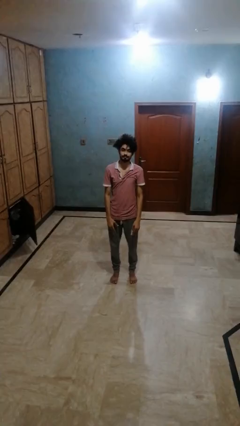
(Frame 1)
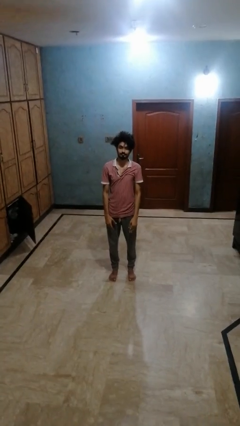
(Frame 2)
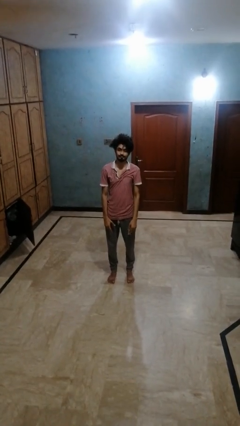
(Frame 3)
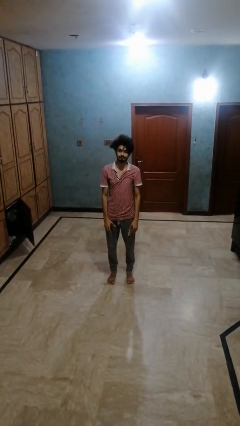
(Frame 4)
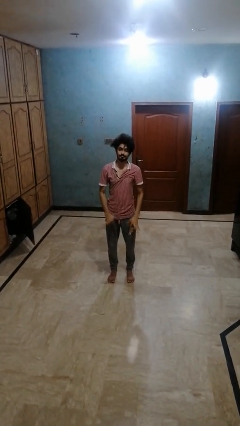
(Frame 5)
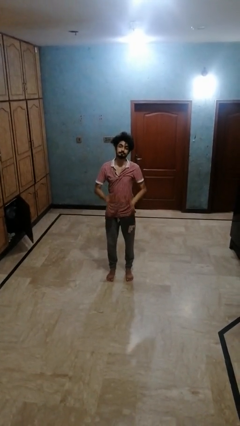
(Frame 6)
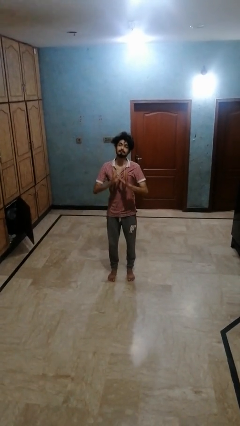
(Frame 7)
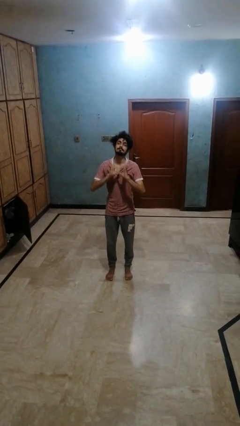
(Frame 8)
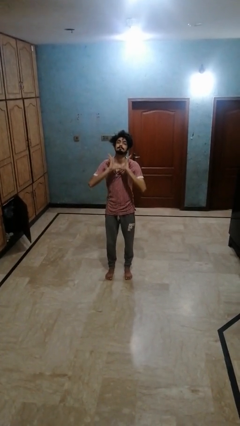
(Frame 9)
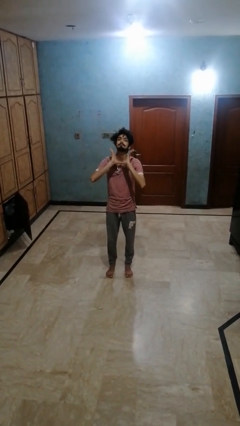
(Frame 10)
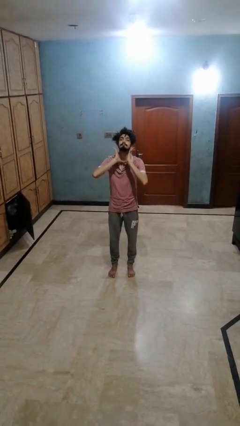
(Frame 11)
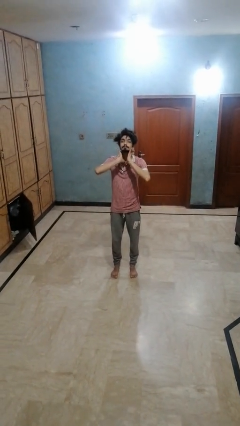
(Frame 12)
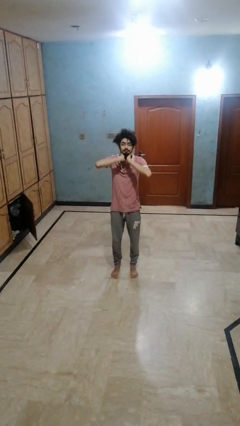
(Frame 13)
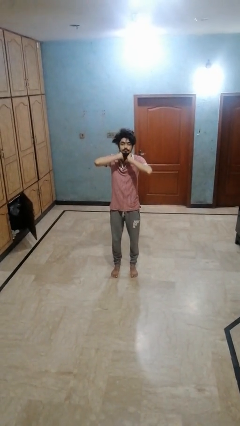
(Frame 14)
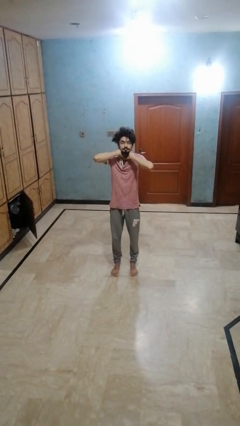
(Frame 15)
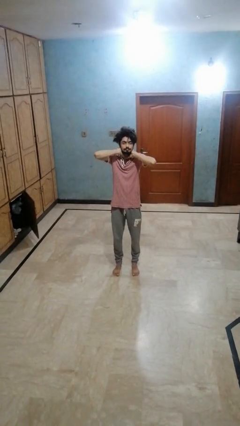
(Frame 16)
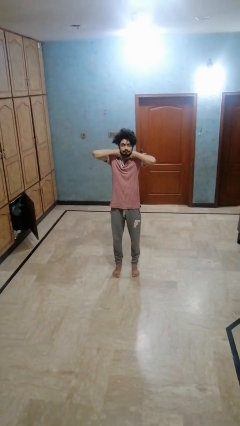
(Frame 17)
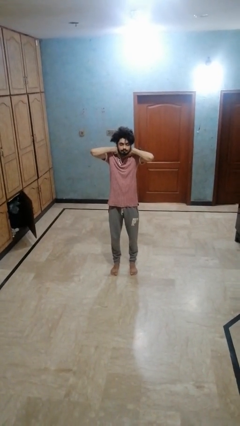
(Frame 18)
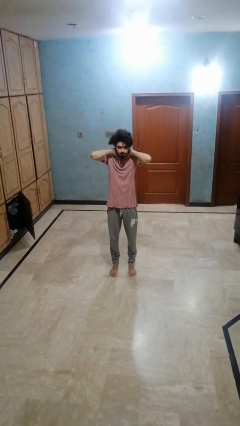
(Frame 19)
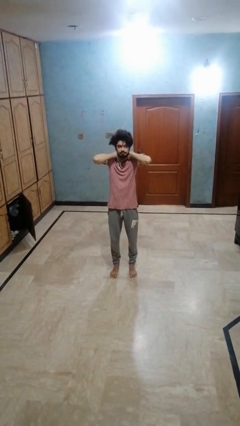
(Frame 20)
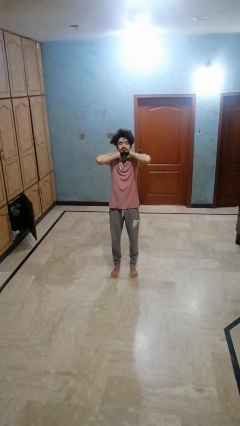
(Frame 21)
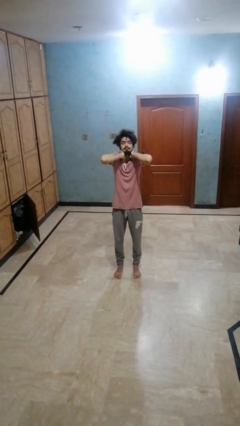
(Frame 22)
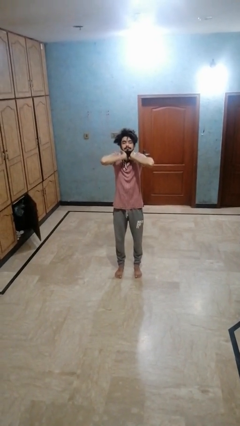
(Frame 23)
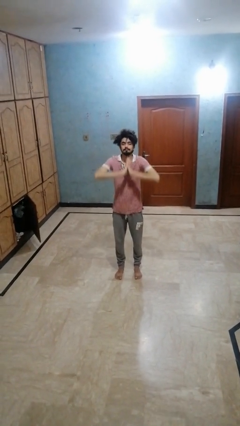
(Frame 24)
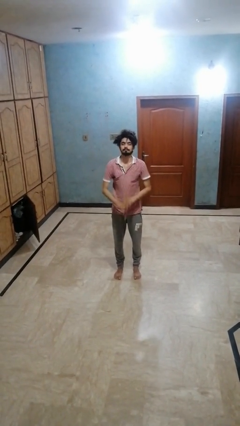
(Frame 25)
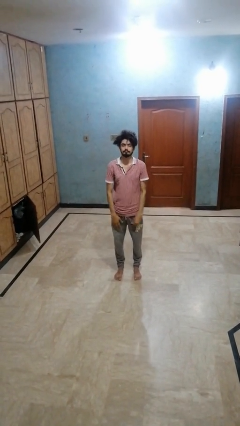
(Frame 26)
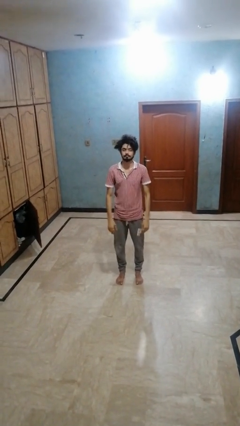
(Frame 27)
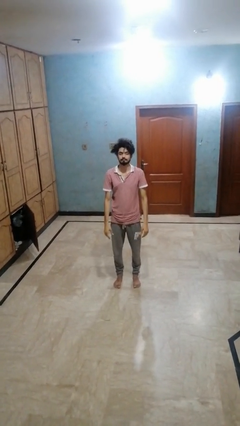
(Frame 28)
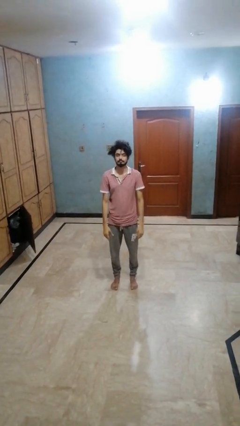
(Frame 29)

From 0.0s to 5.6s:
person rubs neck

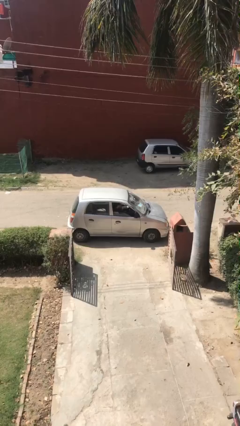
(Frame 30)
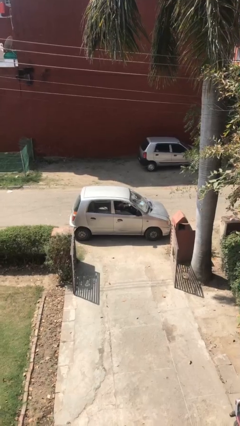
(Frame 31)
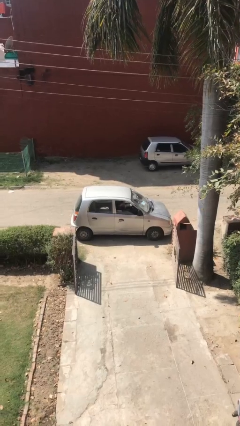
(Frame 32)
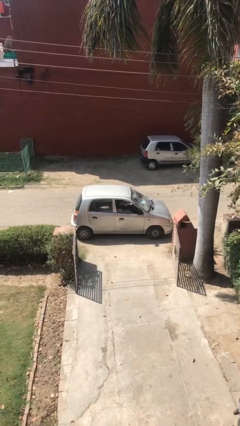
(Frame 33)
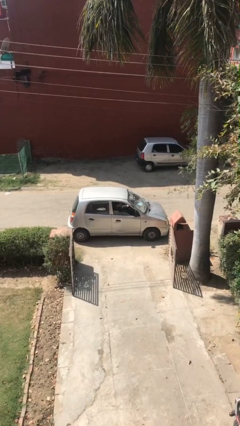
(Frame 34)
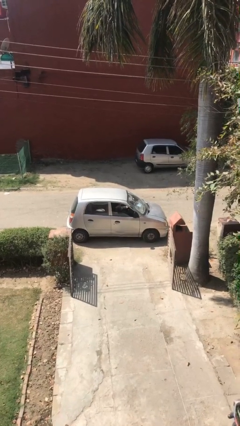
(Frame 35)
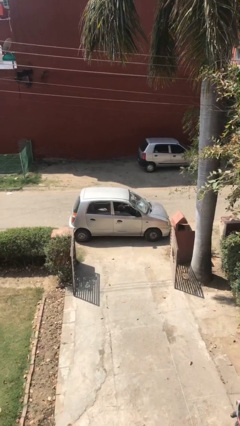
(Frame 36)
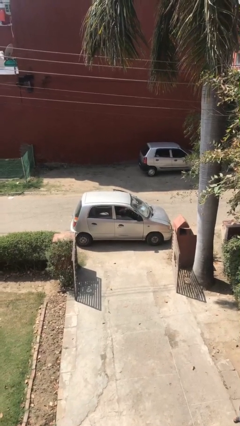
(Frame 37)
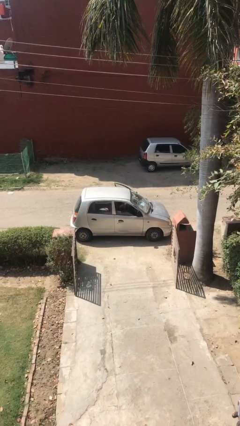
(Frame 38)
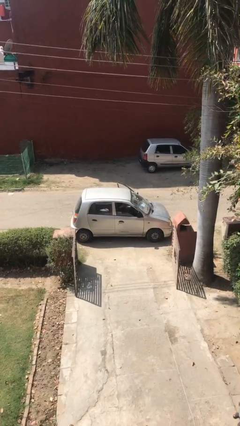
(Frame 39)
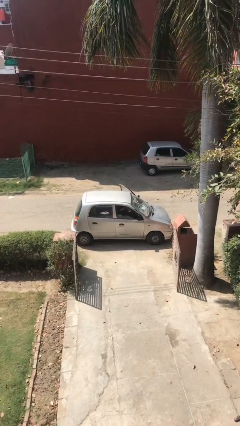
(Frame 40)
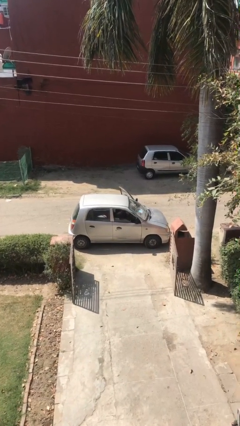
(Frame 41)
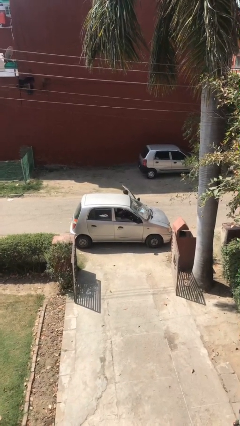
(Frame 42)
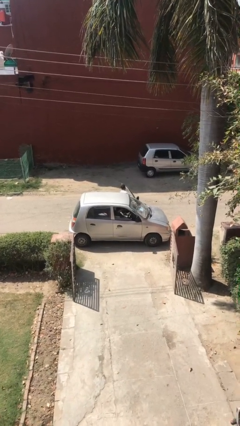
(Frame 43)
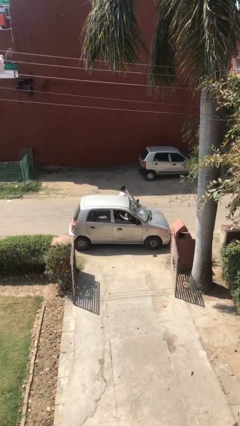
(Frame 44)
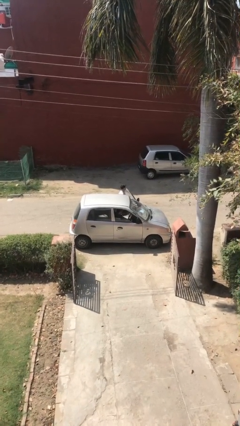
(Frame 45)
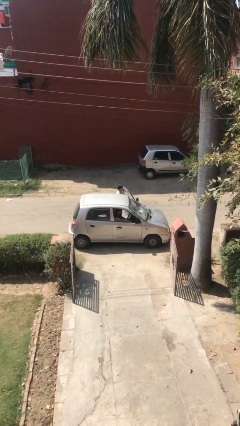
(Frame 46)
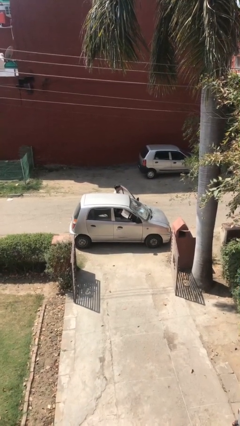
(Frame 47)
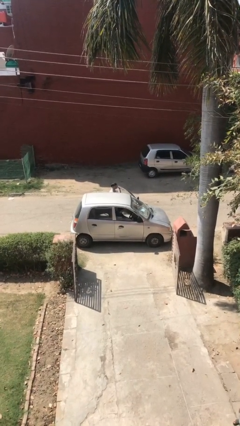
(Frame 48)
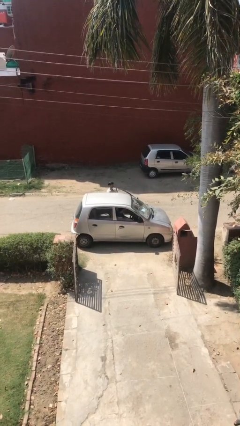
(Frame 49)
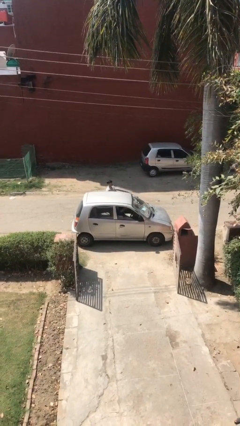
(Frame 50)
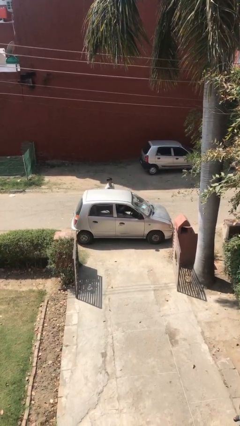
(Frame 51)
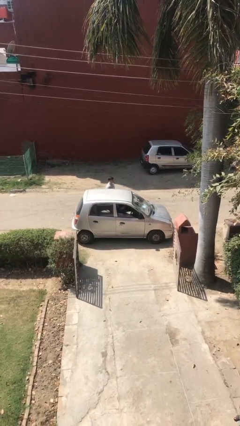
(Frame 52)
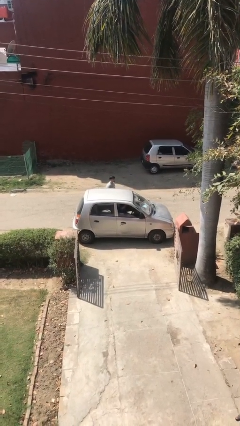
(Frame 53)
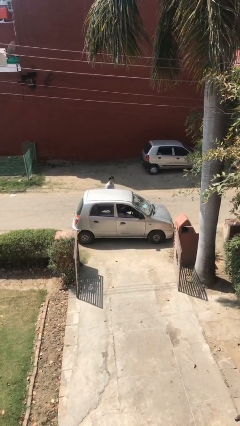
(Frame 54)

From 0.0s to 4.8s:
car drops off person

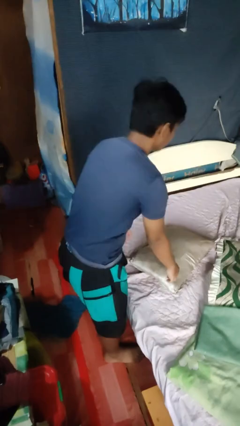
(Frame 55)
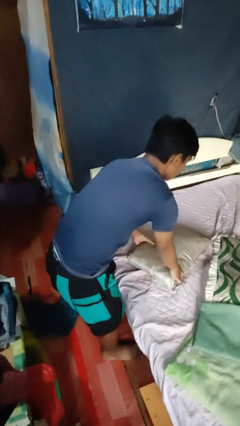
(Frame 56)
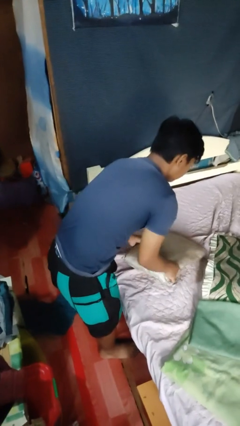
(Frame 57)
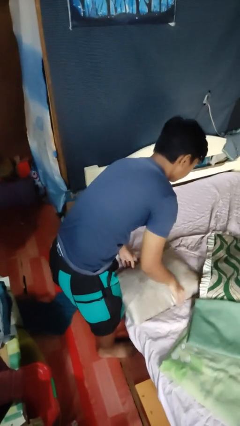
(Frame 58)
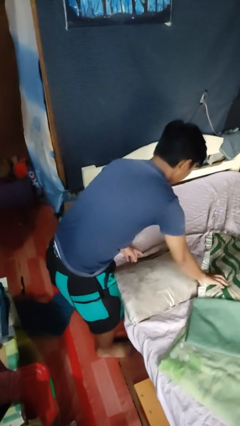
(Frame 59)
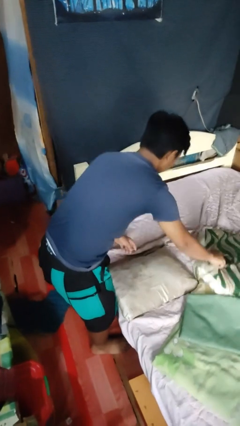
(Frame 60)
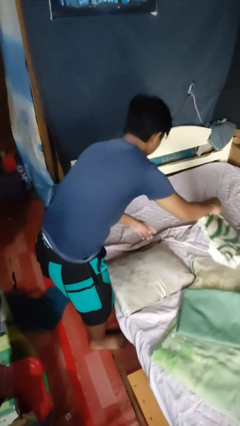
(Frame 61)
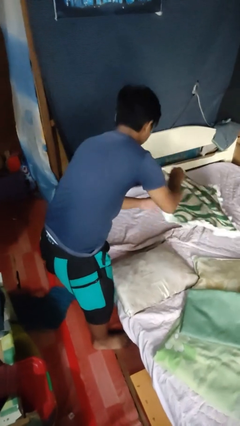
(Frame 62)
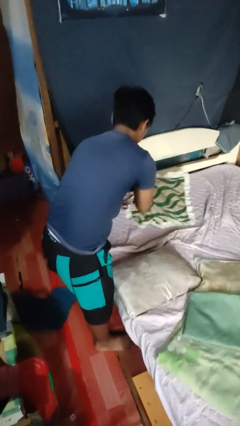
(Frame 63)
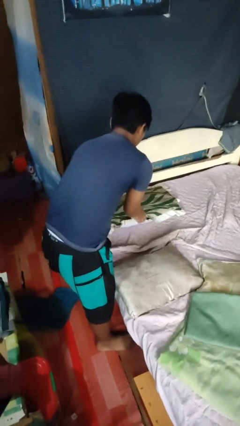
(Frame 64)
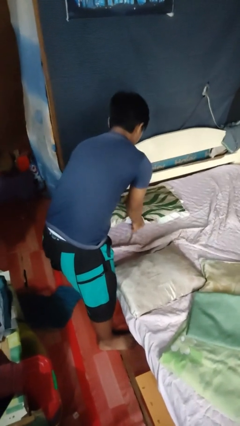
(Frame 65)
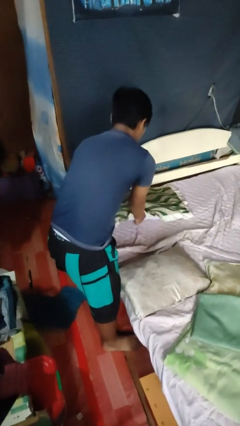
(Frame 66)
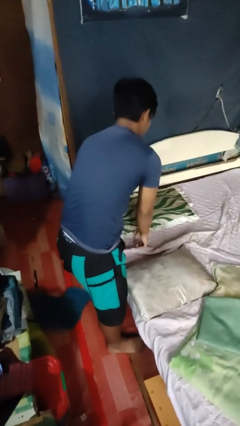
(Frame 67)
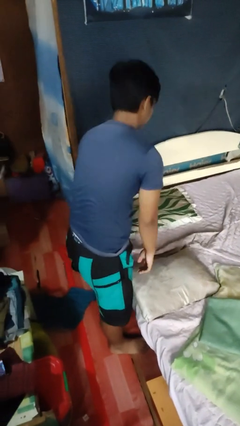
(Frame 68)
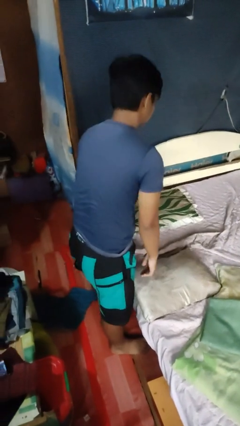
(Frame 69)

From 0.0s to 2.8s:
person makes bed

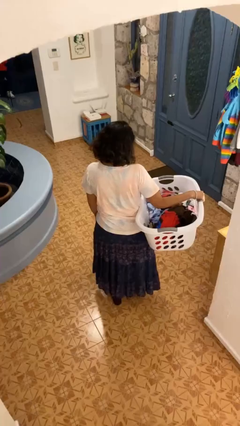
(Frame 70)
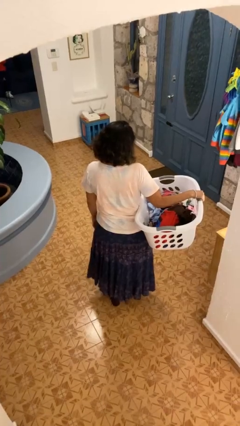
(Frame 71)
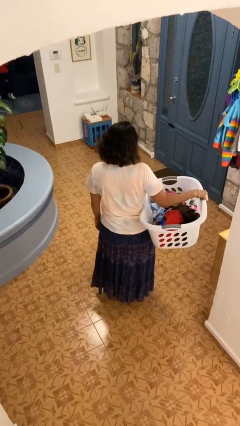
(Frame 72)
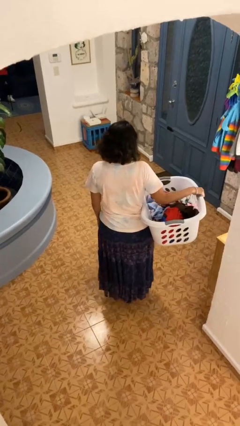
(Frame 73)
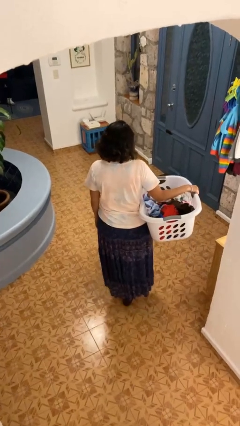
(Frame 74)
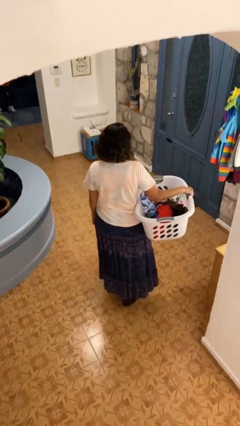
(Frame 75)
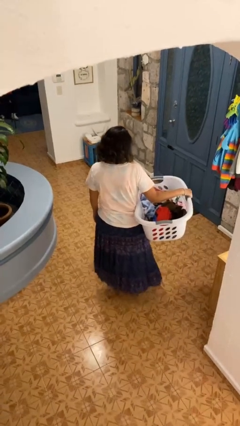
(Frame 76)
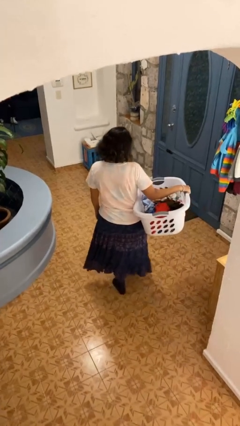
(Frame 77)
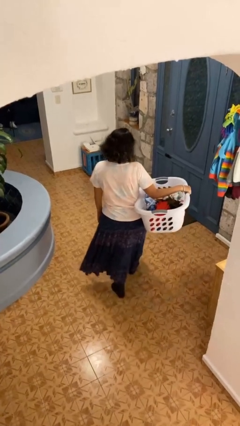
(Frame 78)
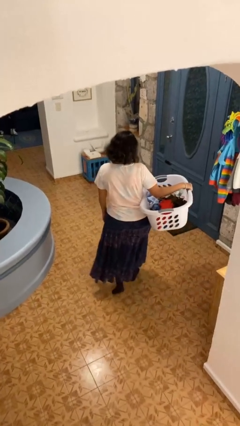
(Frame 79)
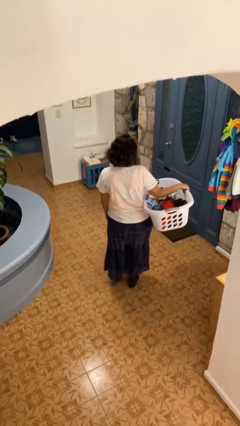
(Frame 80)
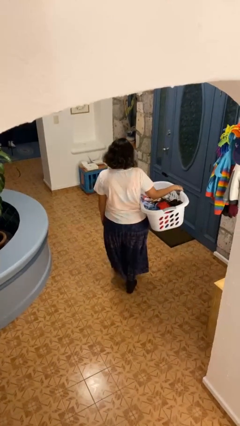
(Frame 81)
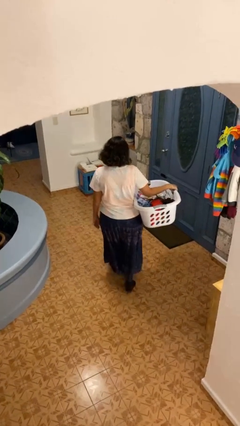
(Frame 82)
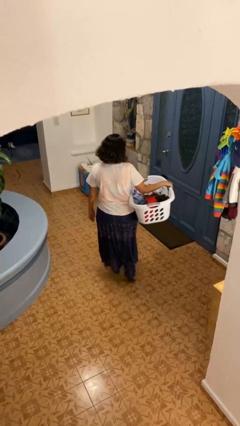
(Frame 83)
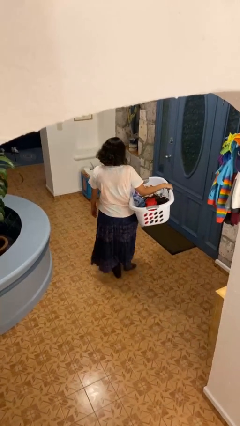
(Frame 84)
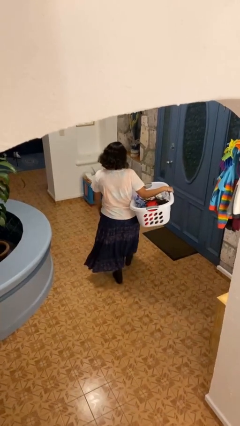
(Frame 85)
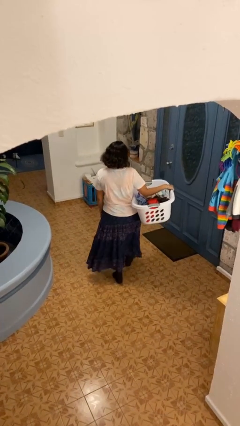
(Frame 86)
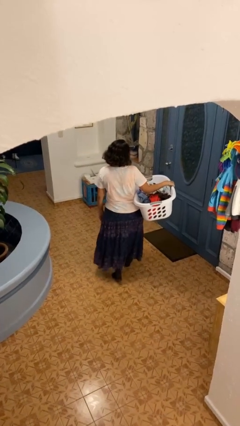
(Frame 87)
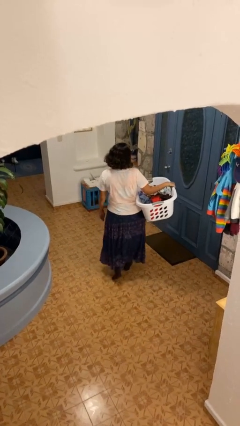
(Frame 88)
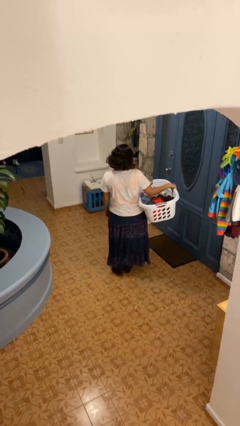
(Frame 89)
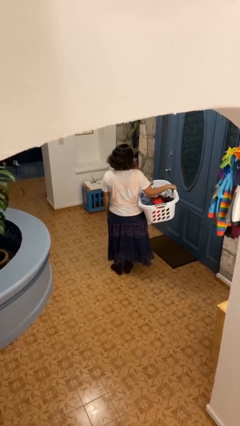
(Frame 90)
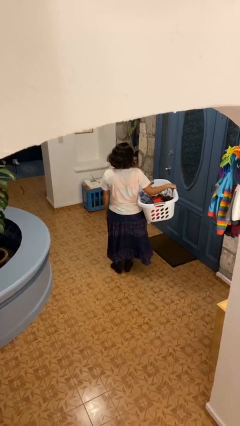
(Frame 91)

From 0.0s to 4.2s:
person carries laundry basket
